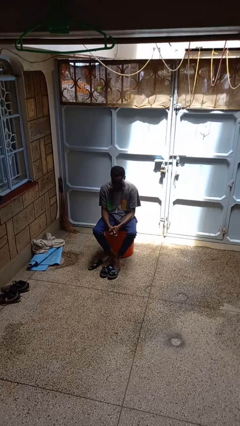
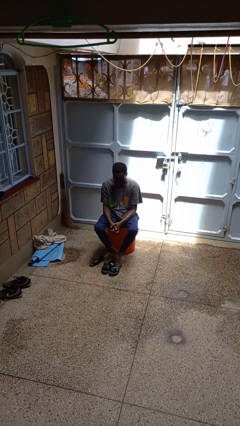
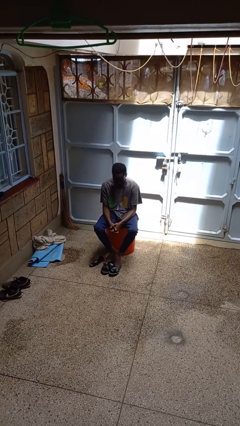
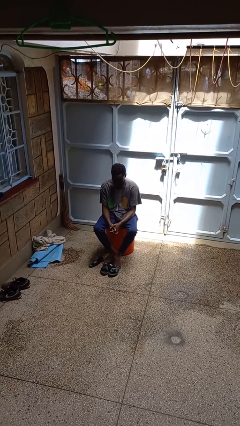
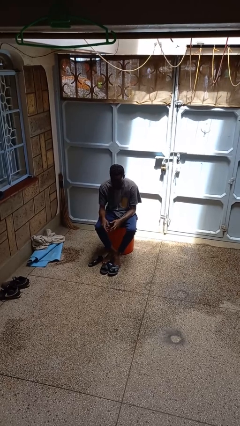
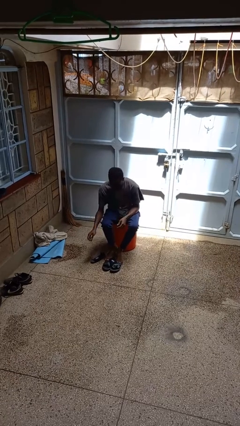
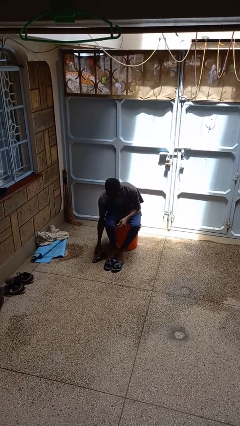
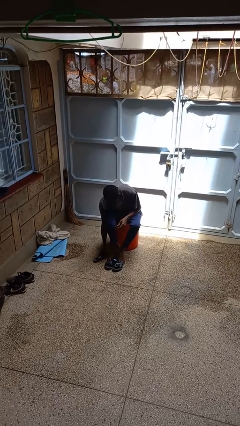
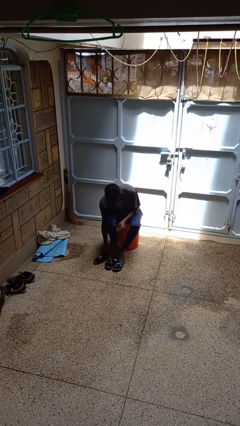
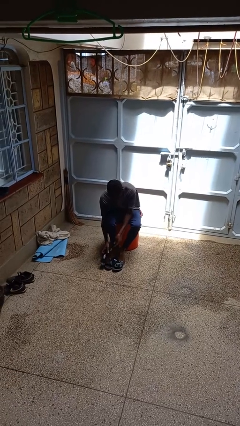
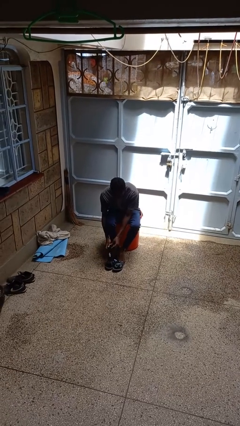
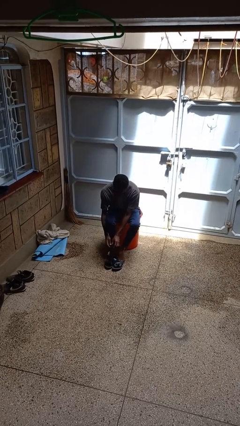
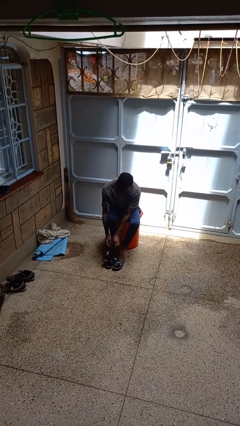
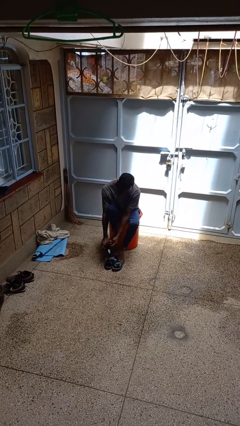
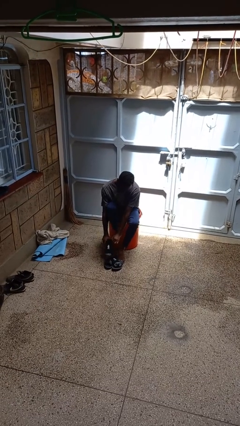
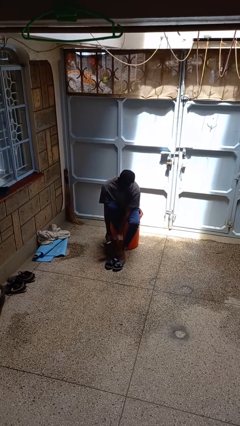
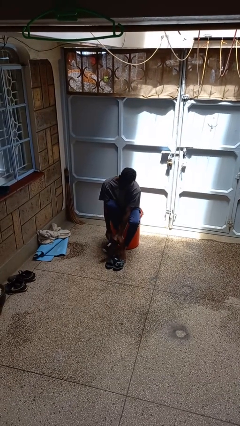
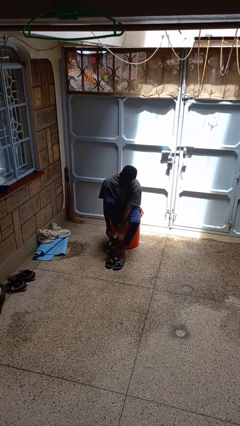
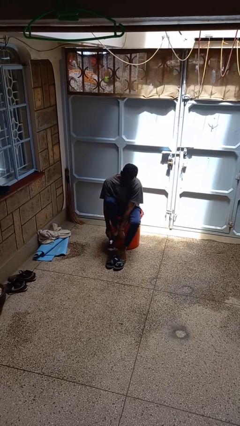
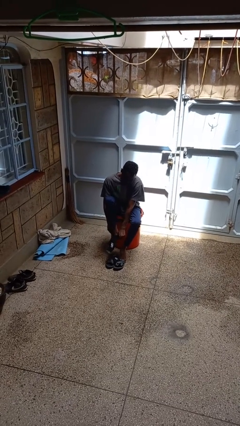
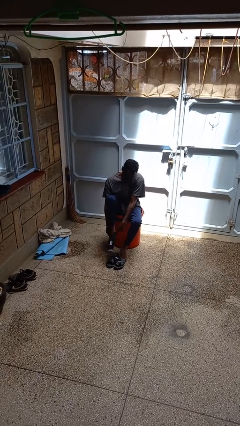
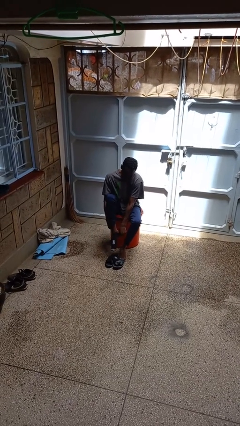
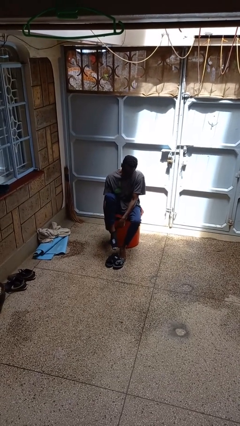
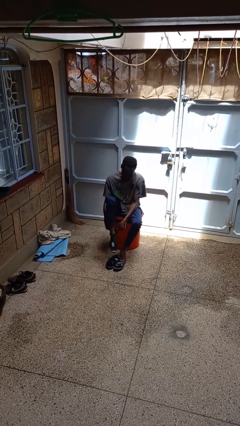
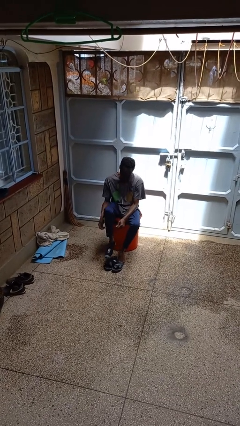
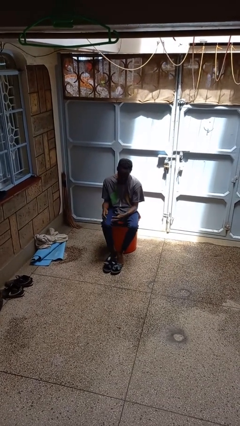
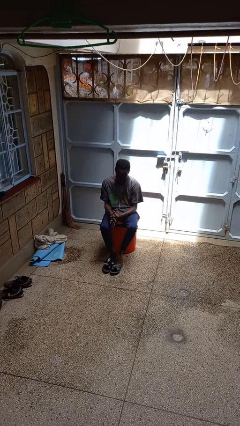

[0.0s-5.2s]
person puts on socks

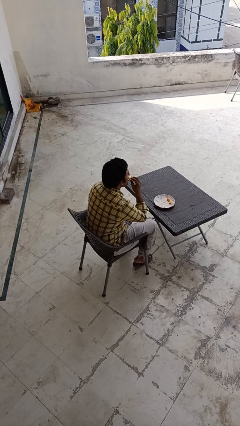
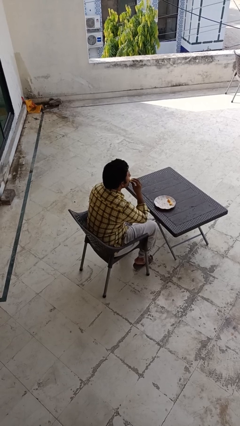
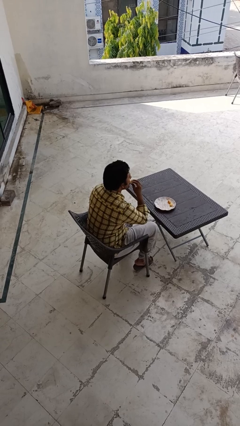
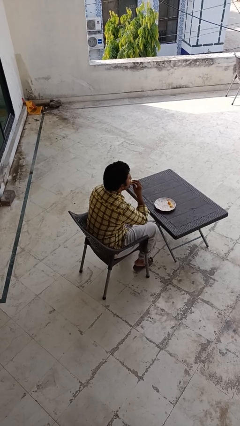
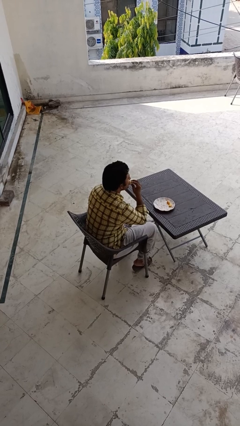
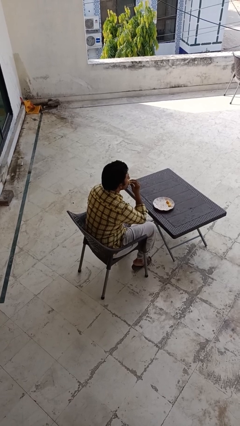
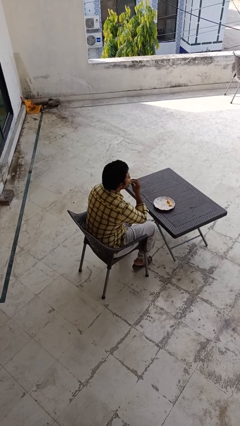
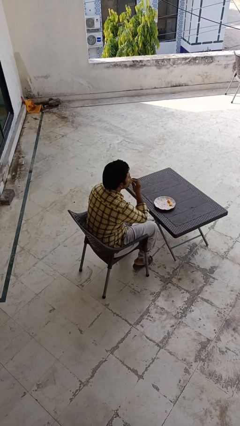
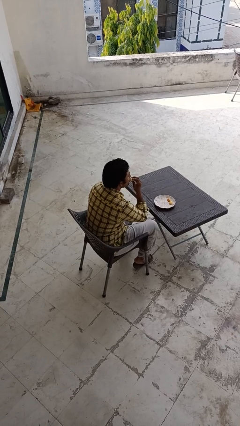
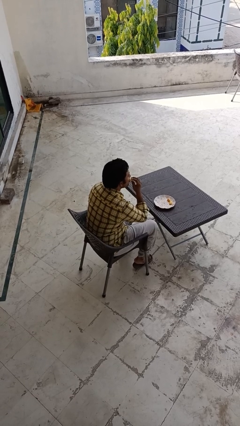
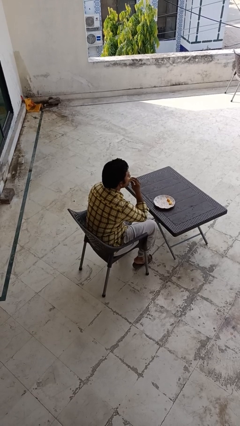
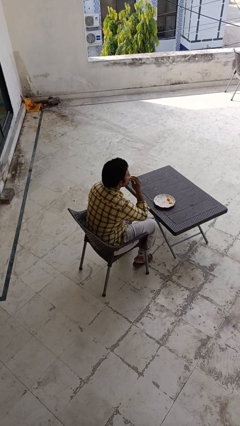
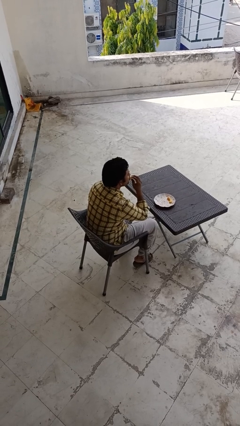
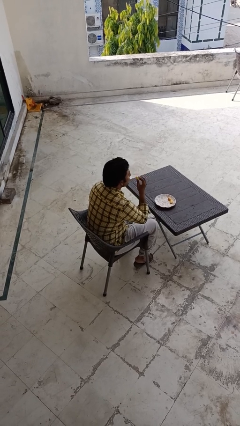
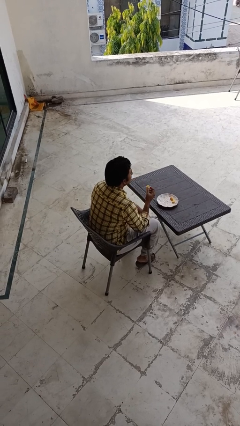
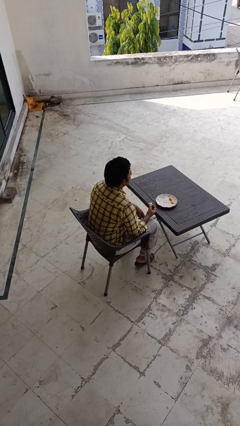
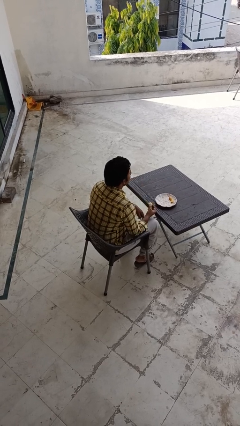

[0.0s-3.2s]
person eats with hands

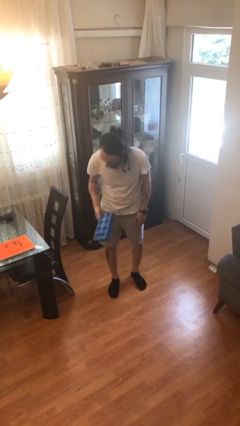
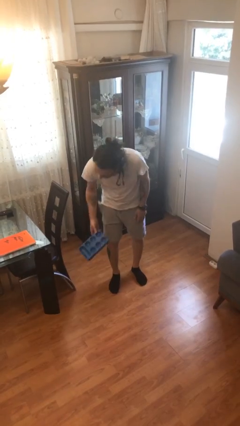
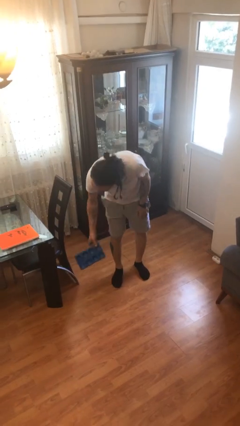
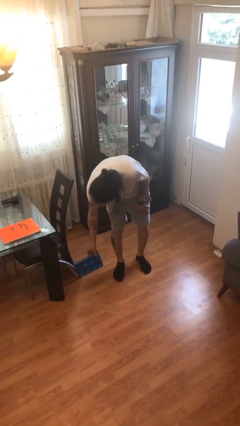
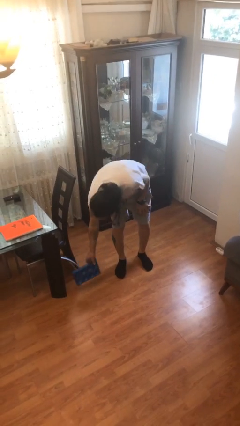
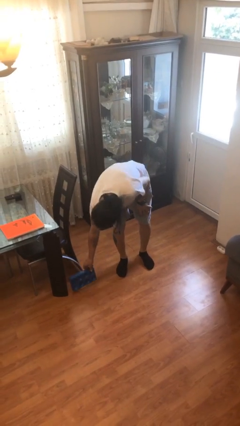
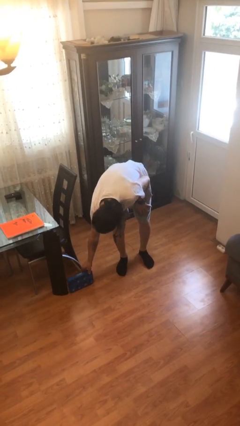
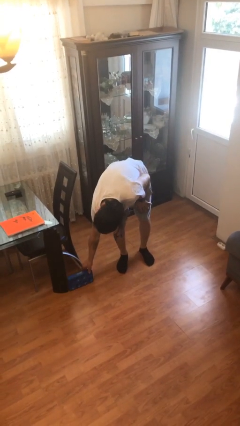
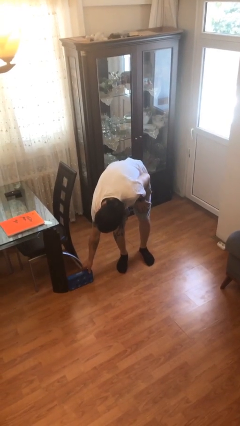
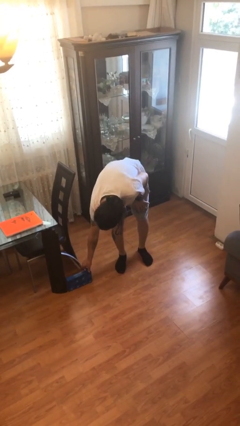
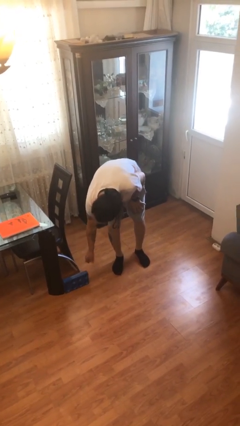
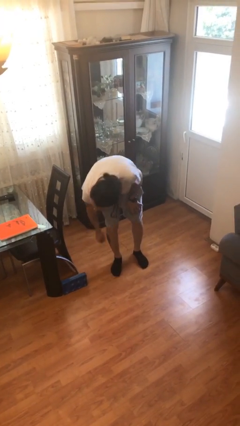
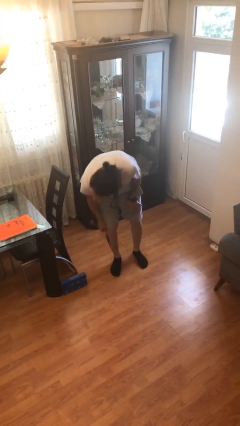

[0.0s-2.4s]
person puts down object on floor

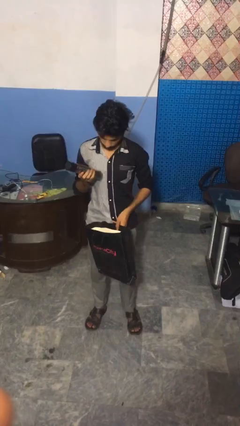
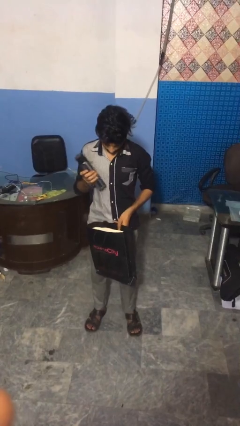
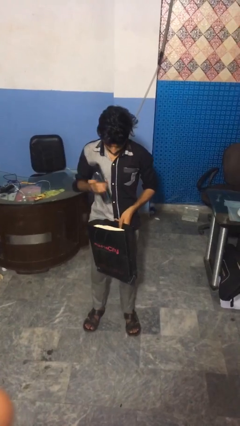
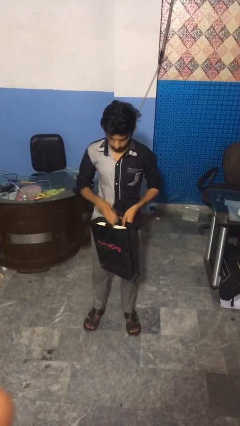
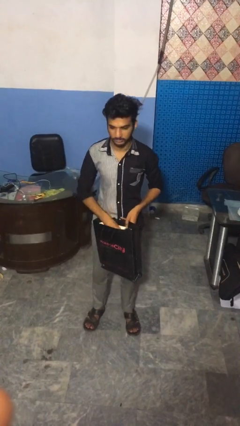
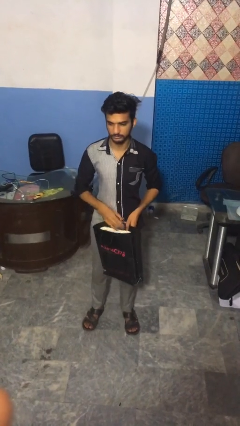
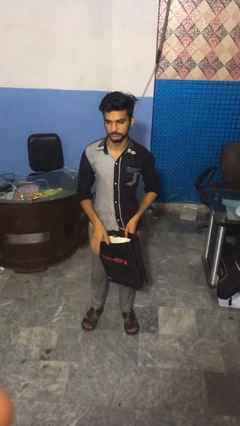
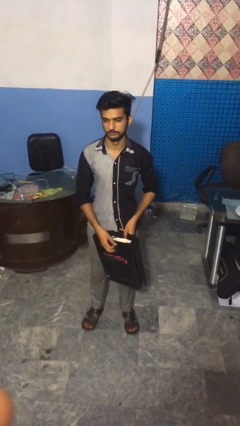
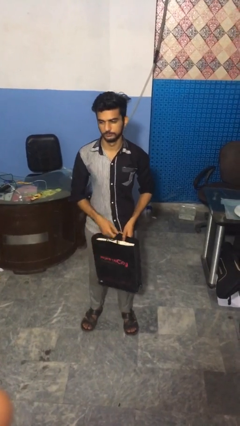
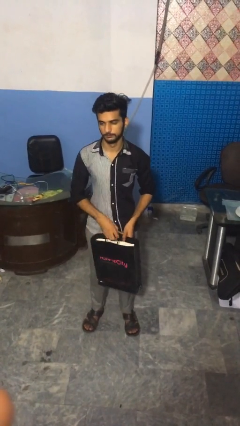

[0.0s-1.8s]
person puts object into bag

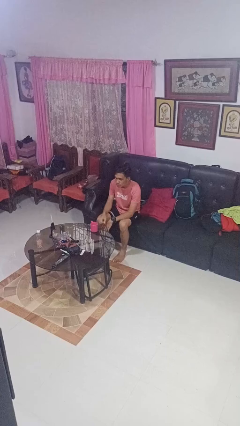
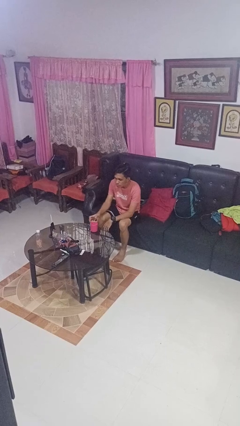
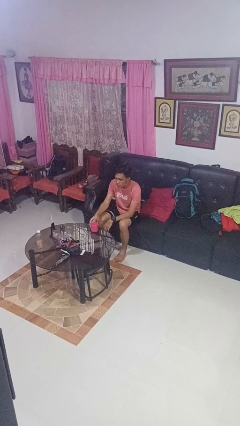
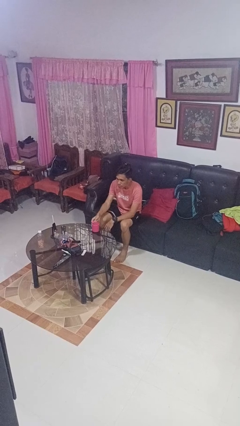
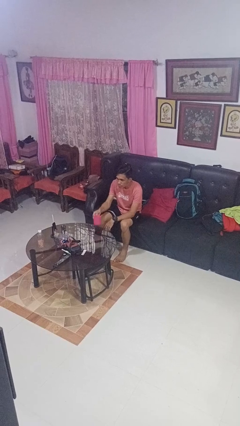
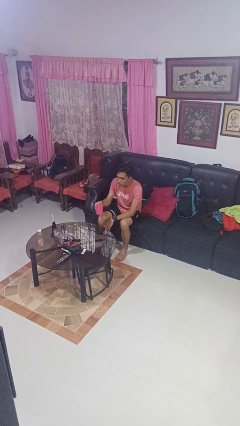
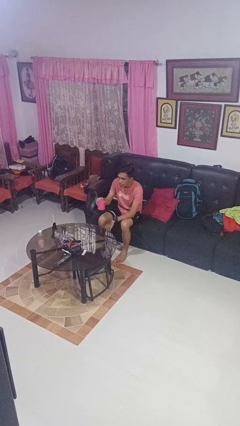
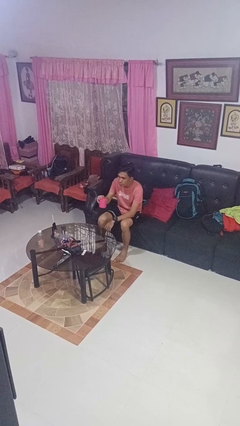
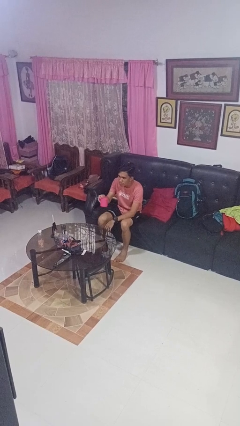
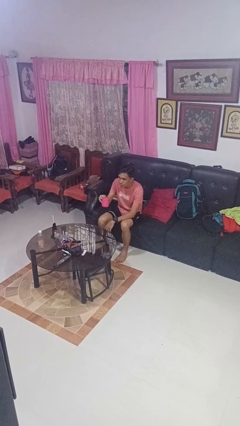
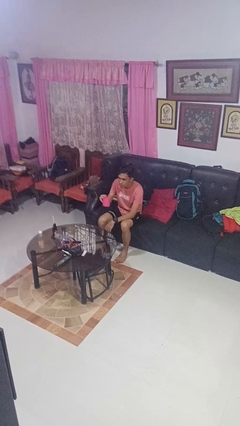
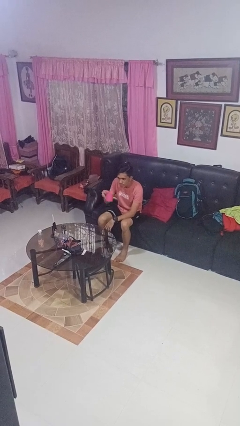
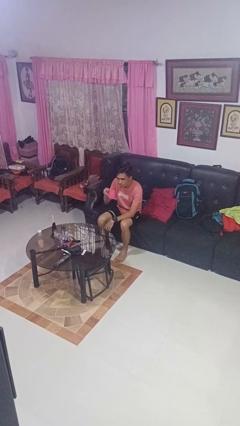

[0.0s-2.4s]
person picks up object from table

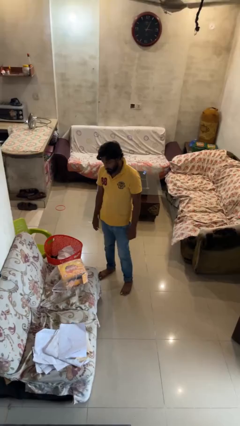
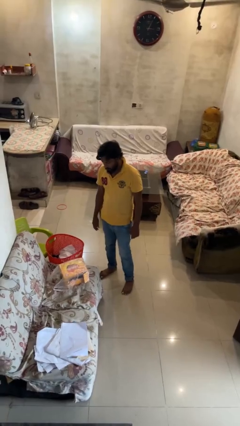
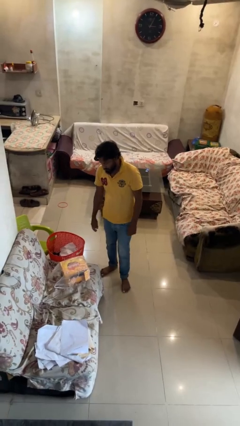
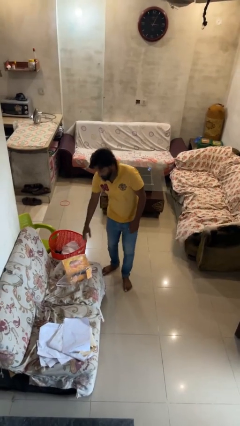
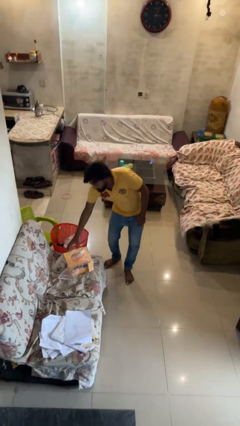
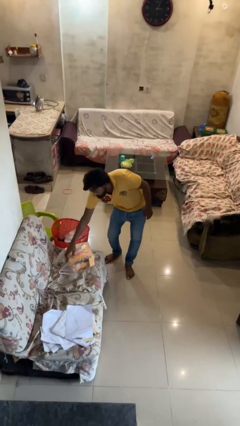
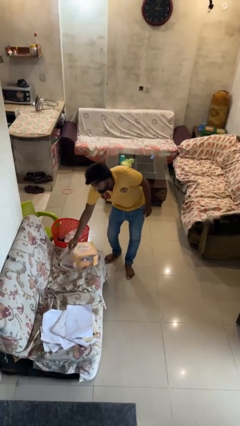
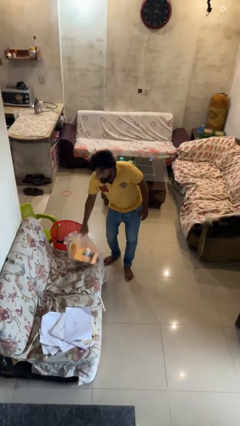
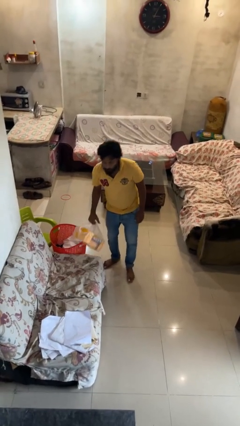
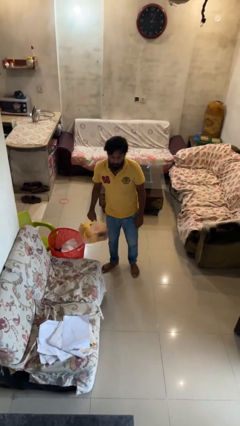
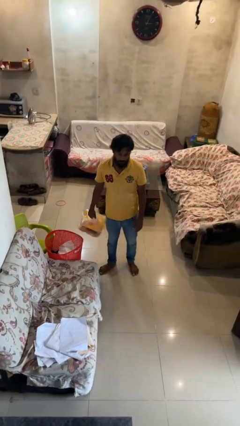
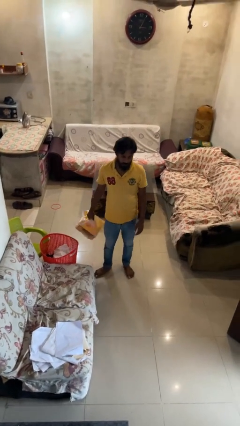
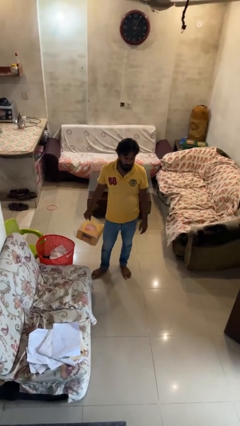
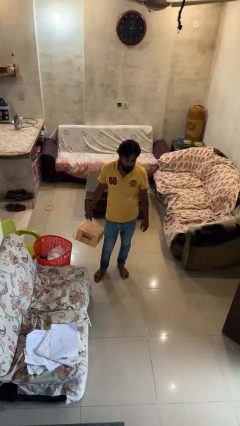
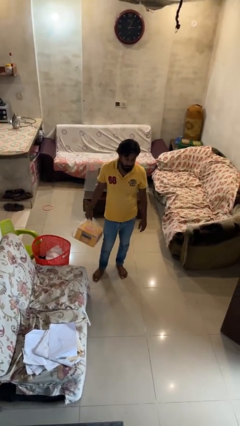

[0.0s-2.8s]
person picks up object from couch
